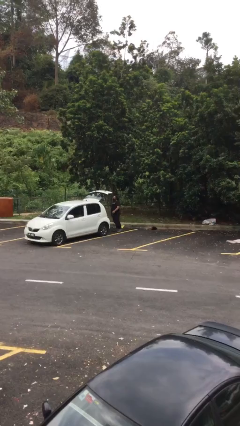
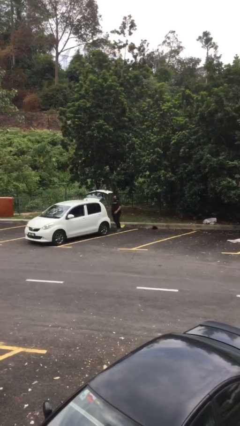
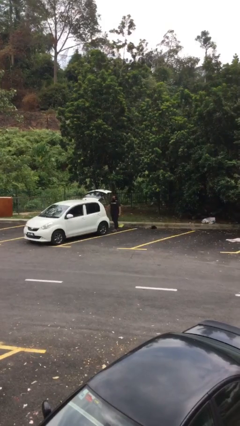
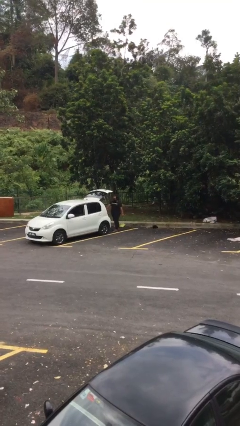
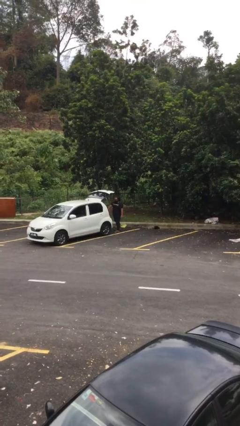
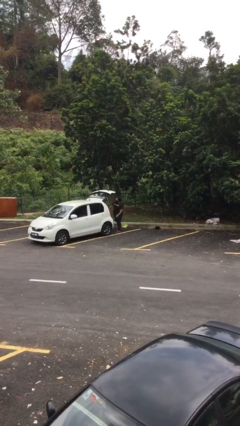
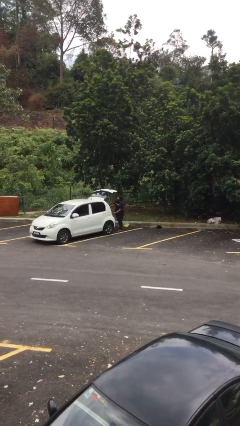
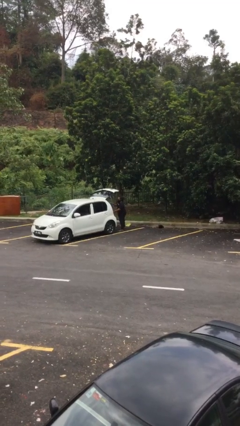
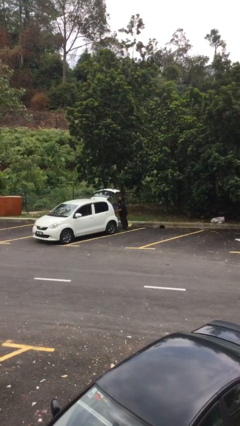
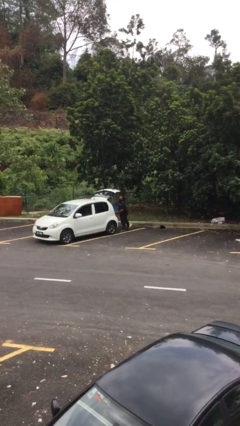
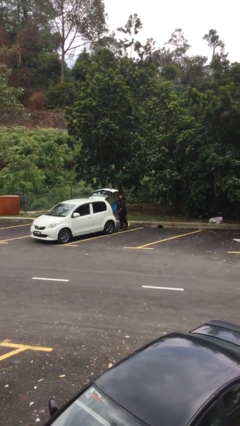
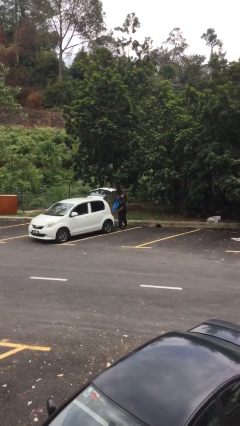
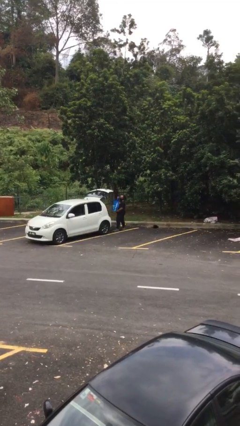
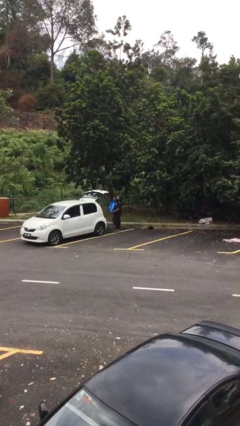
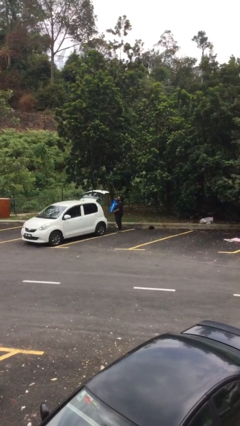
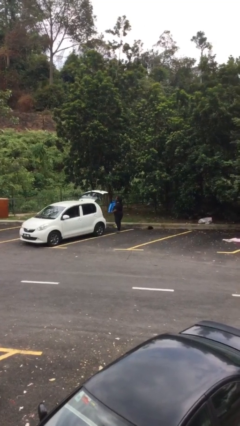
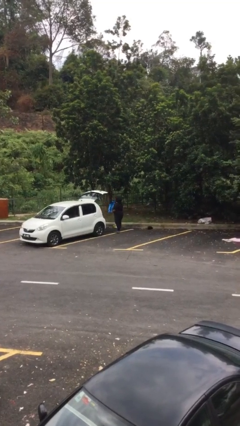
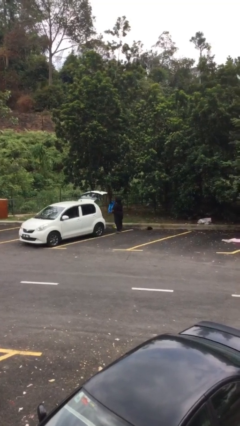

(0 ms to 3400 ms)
person unloads car

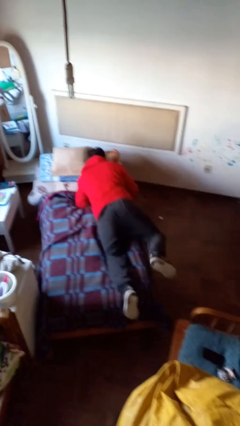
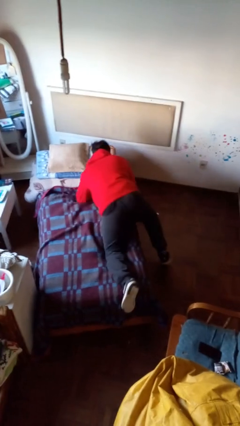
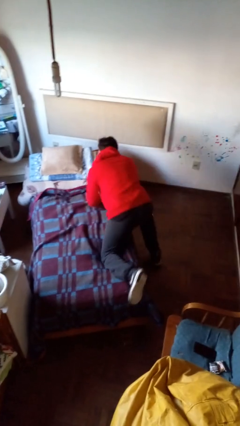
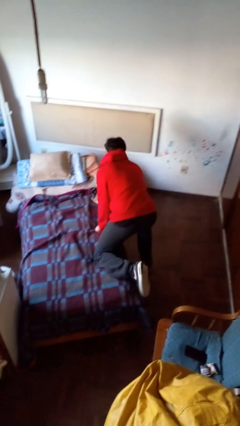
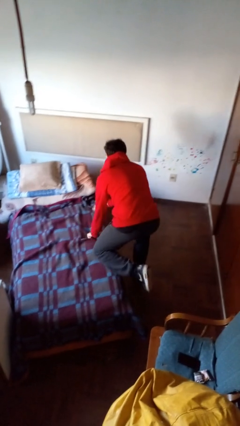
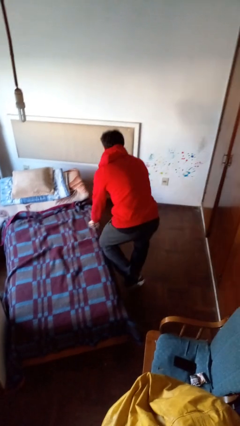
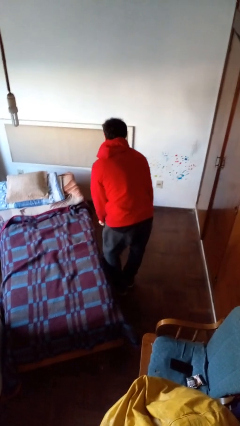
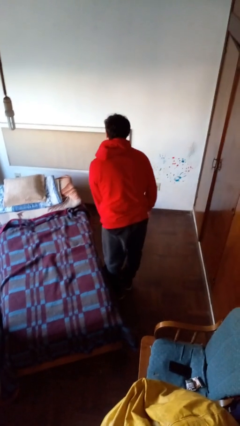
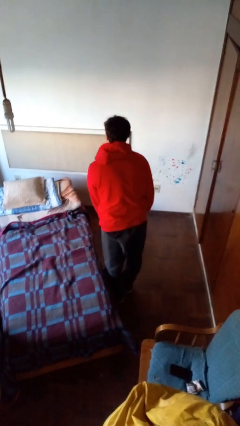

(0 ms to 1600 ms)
person stands up

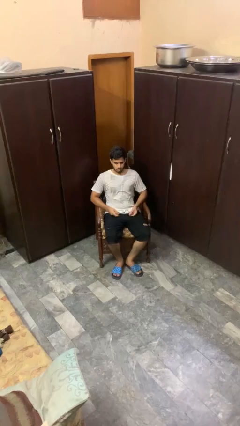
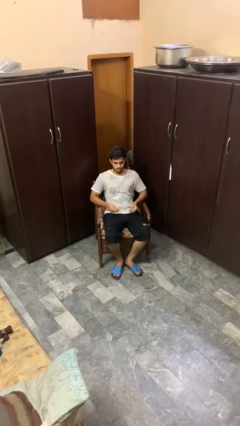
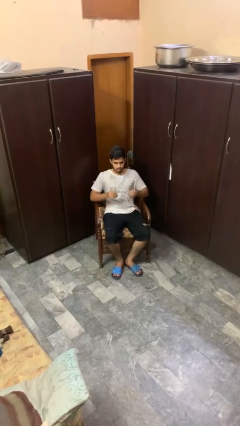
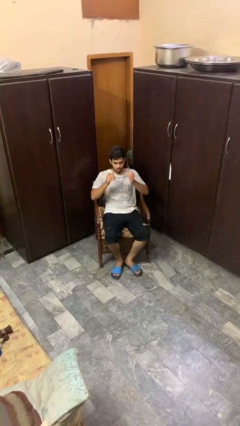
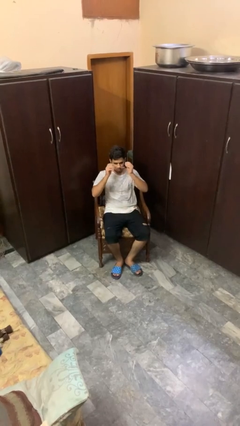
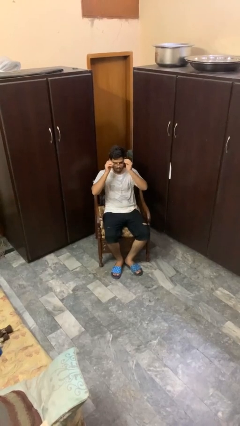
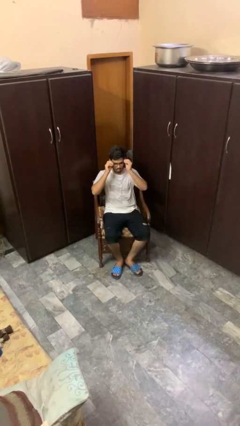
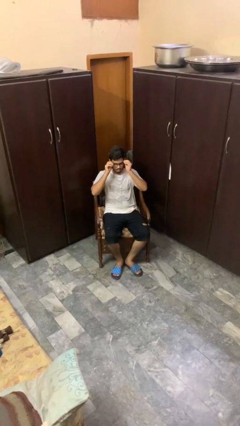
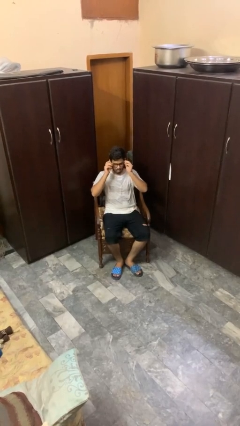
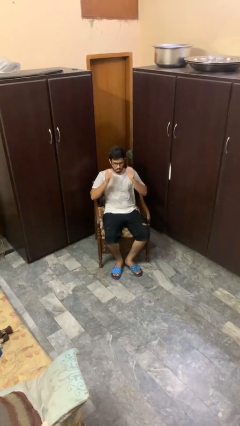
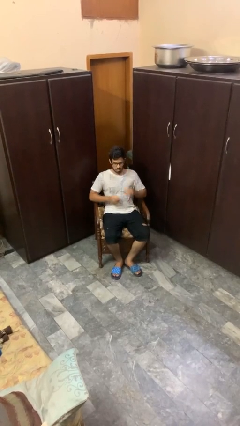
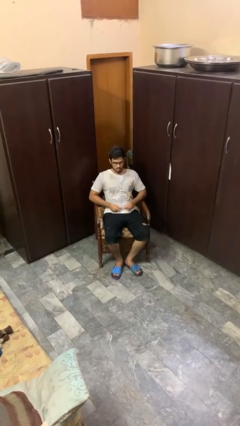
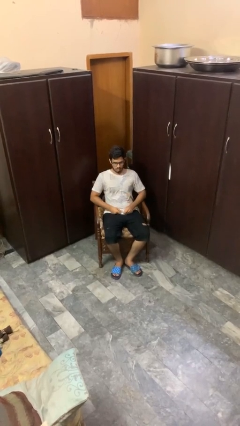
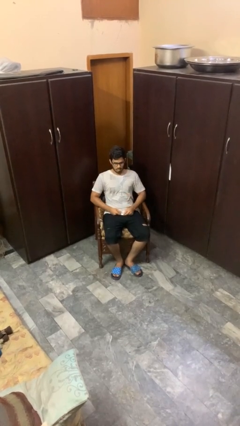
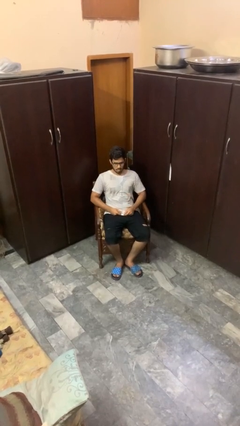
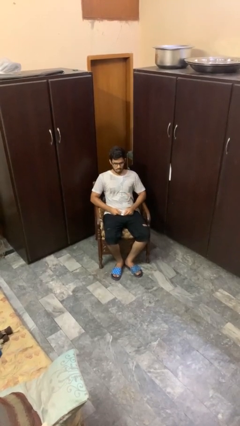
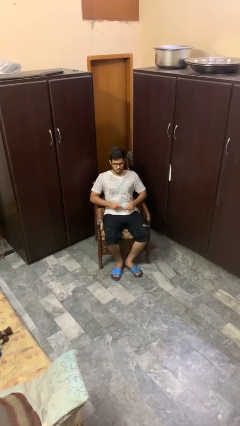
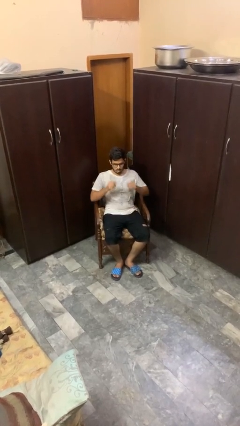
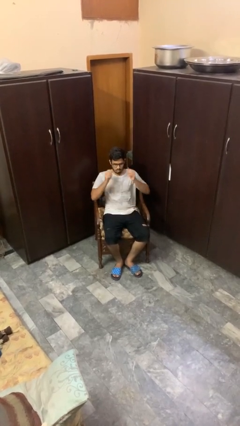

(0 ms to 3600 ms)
person puts on glasses

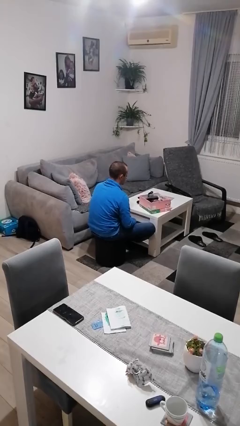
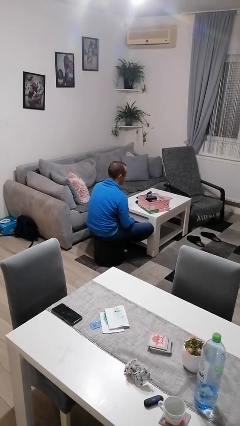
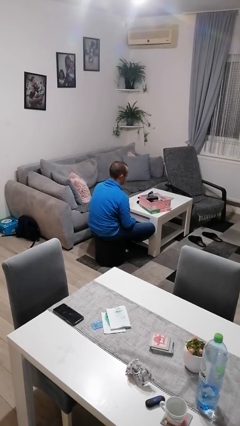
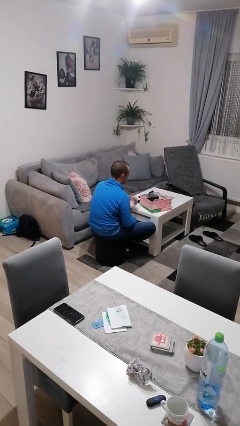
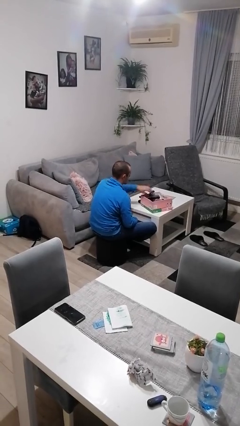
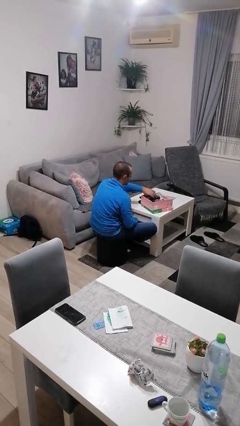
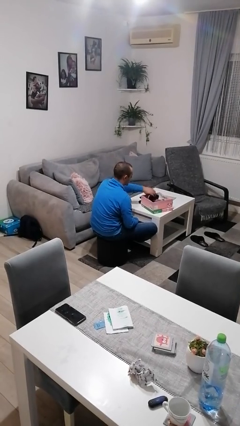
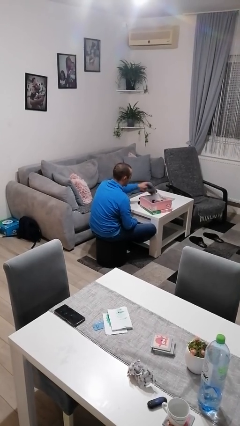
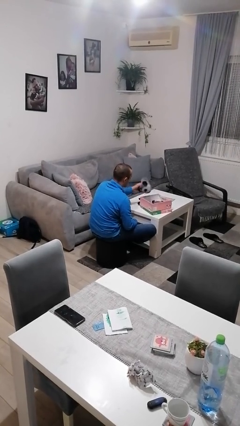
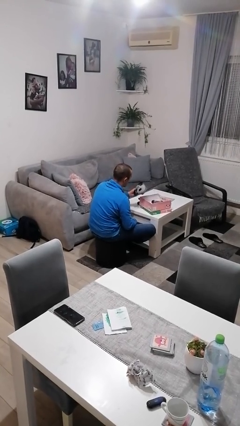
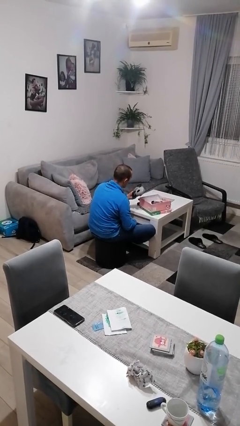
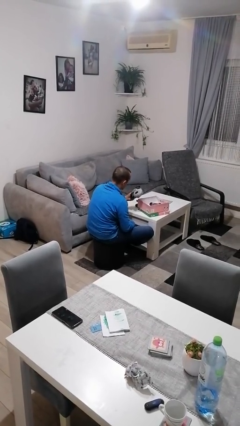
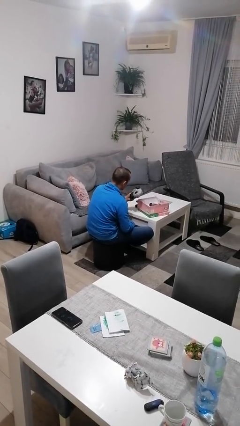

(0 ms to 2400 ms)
person takes object from box

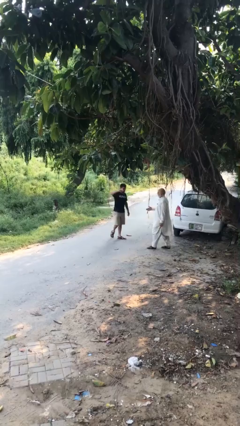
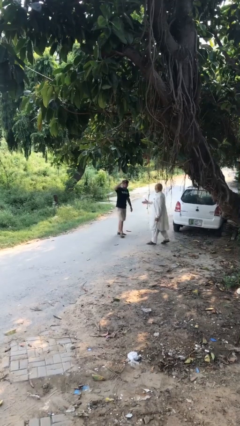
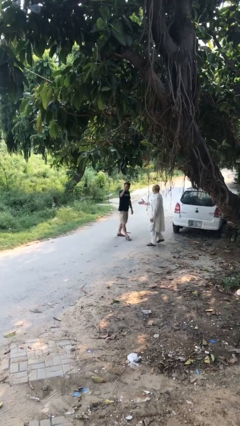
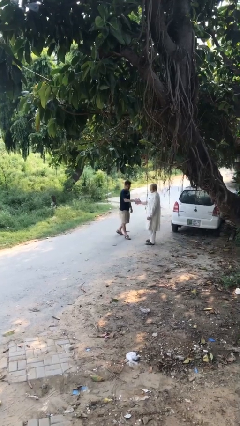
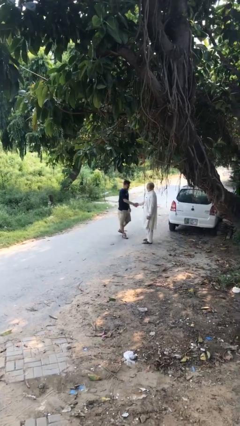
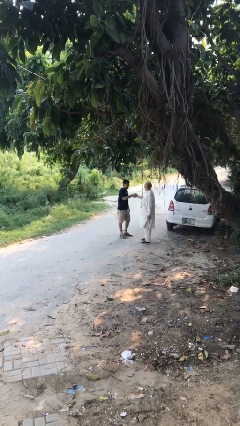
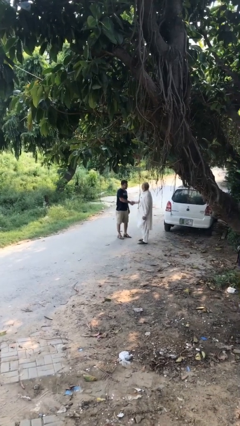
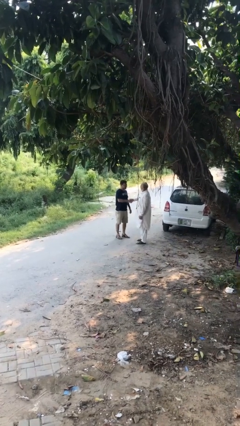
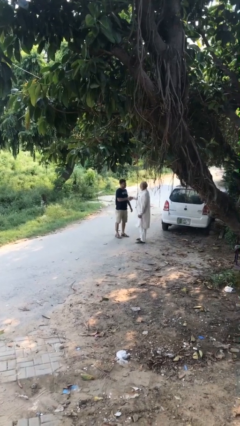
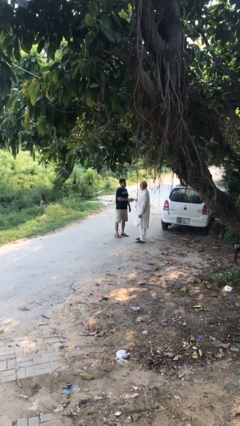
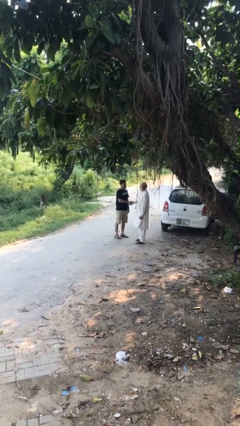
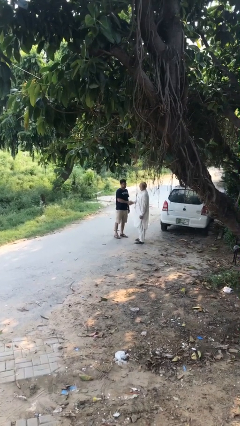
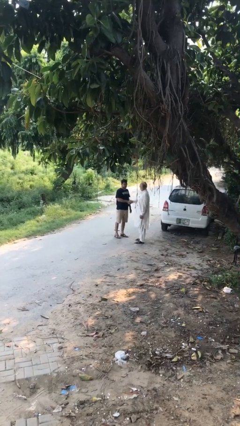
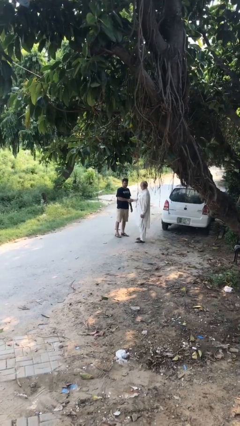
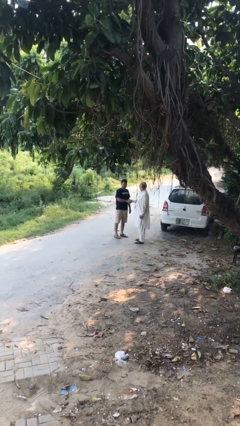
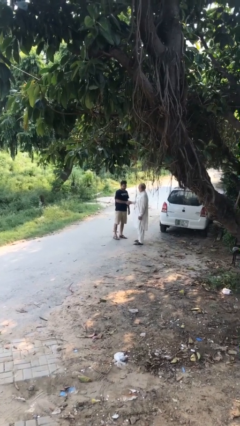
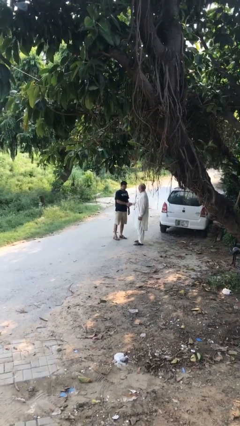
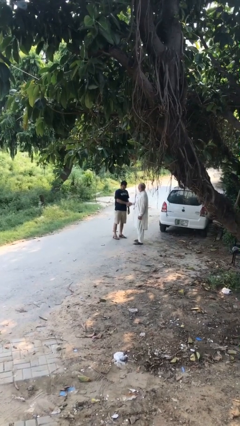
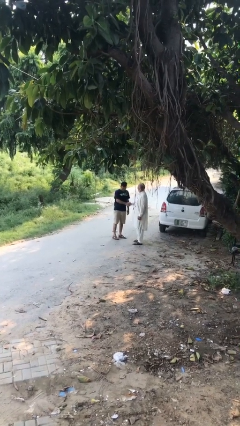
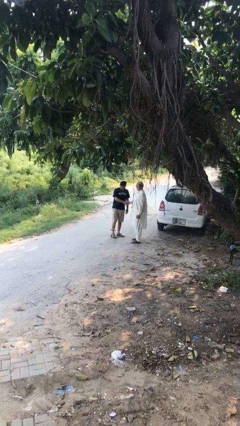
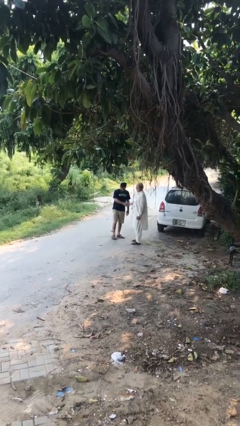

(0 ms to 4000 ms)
person shakes hand

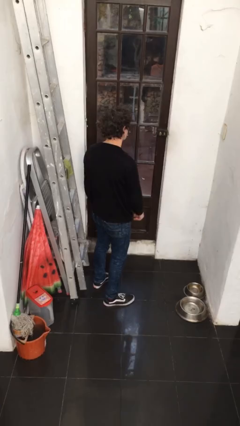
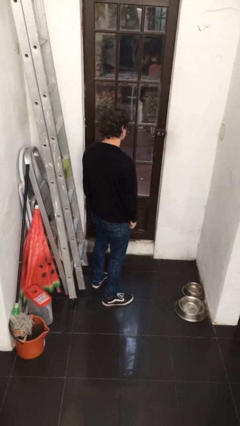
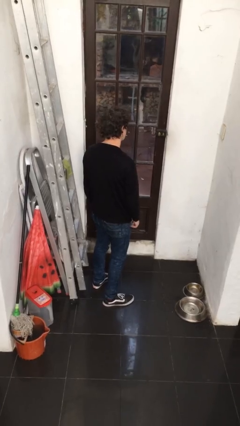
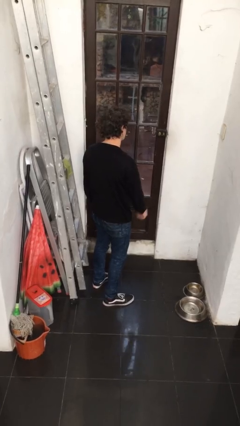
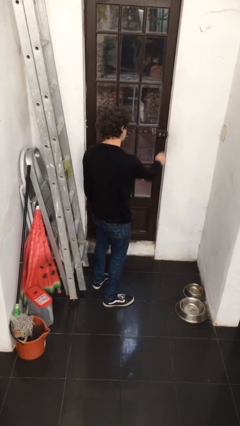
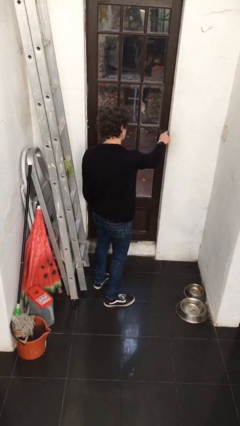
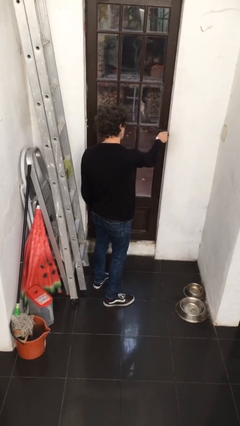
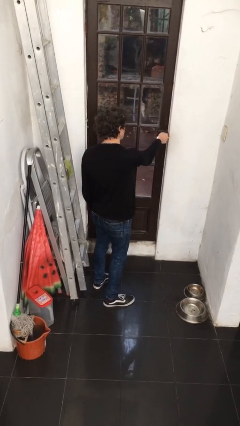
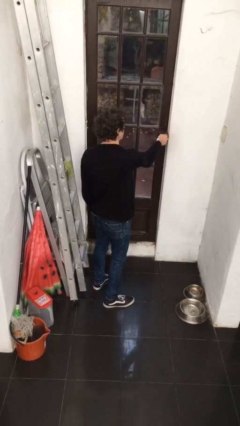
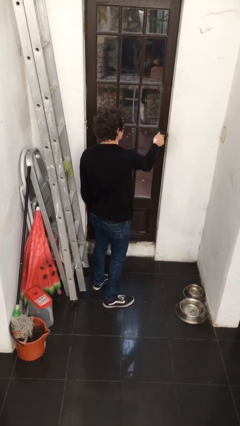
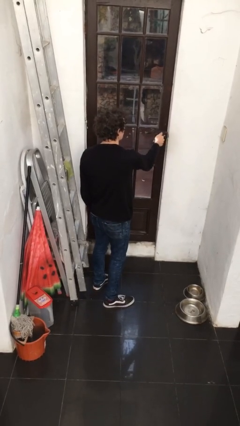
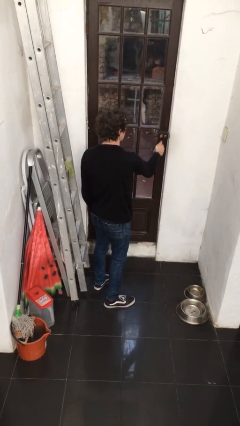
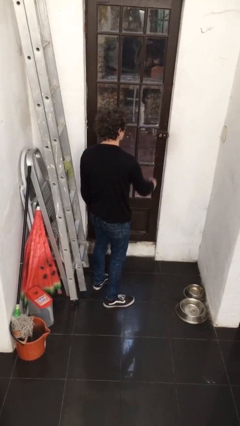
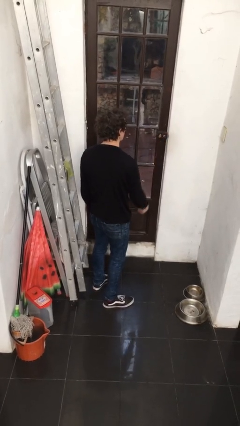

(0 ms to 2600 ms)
person locks door with keys
